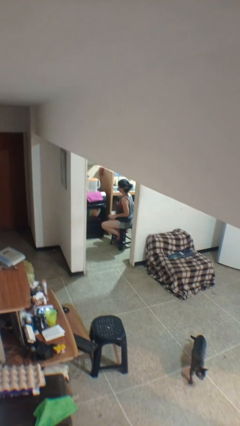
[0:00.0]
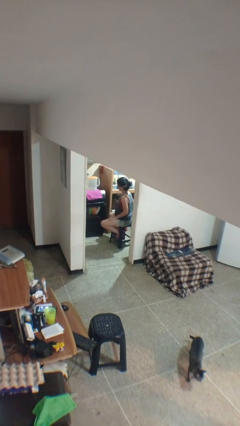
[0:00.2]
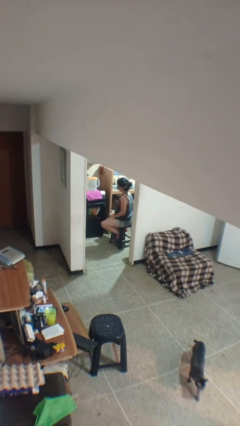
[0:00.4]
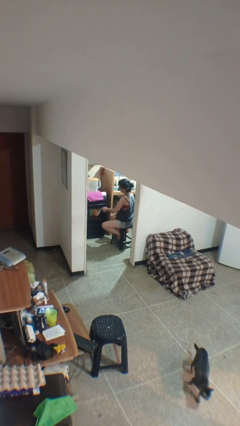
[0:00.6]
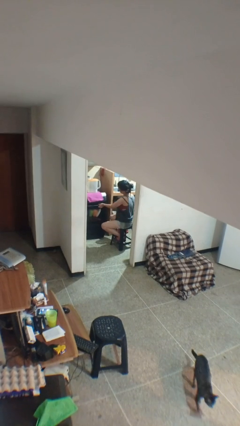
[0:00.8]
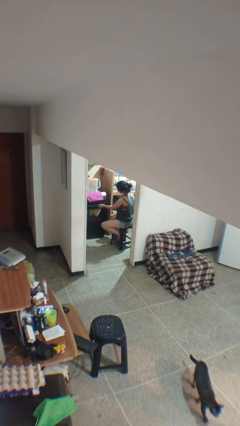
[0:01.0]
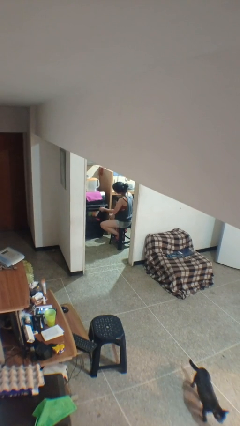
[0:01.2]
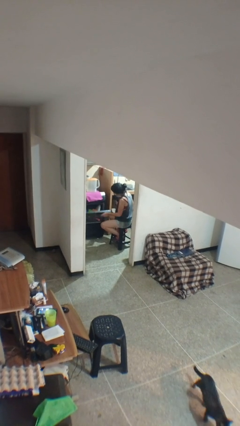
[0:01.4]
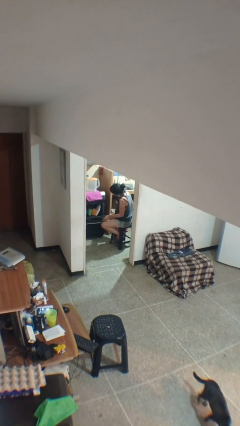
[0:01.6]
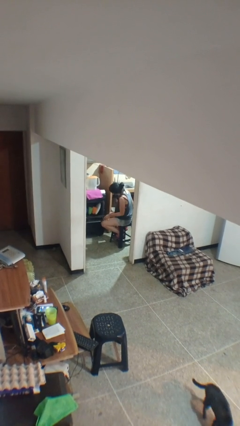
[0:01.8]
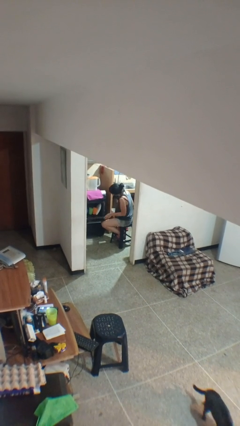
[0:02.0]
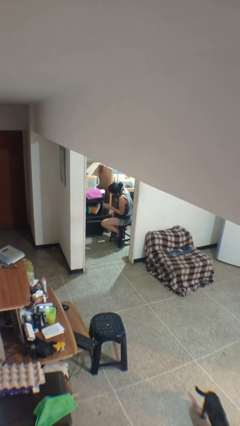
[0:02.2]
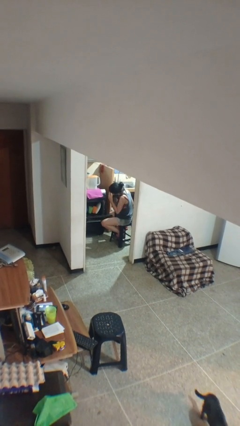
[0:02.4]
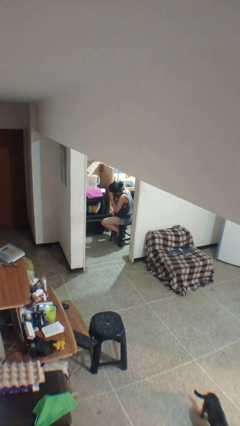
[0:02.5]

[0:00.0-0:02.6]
person opens dishwasher

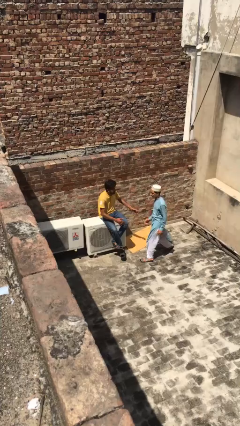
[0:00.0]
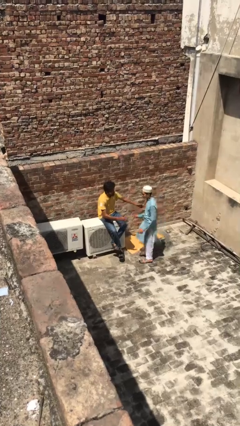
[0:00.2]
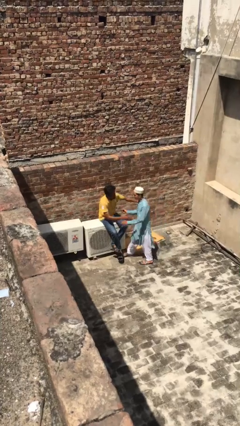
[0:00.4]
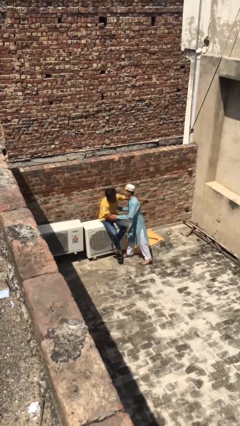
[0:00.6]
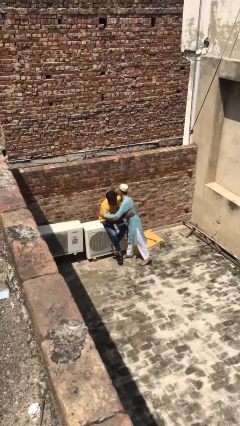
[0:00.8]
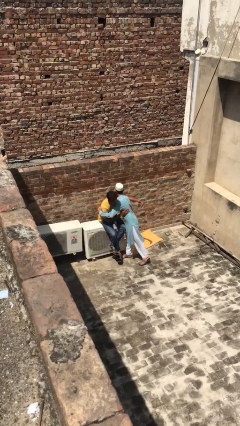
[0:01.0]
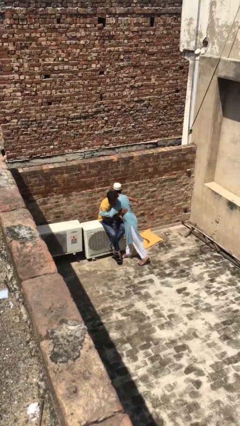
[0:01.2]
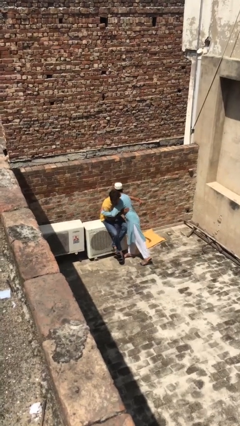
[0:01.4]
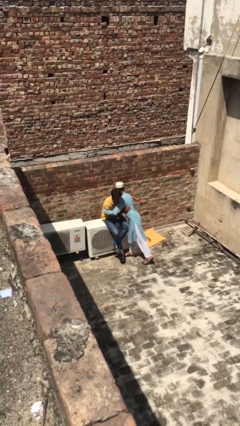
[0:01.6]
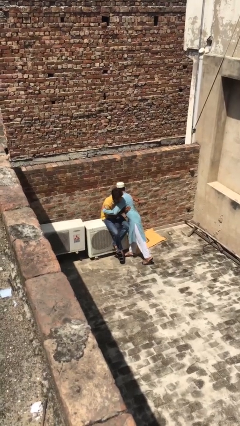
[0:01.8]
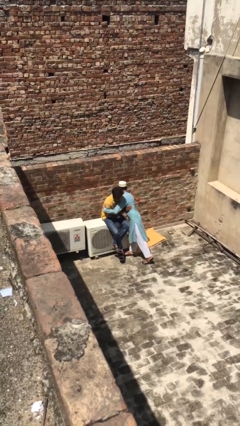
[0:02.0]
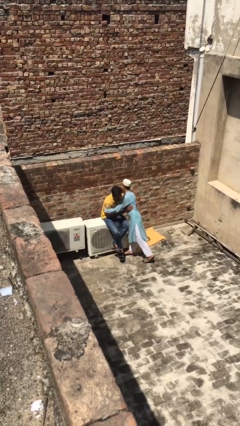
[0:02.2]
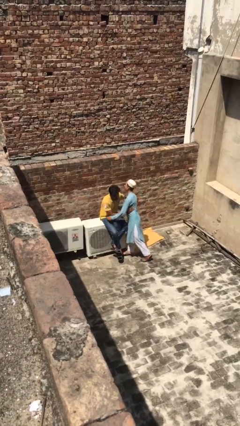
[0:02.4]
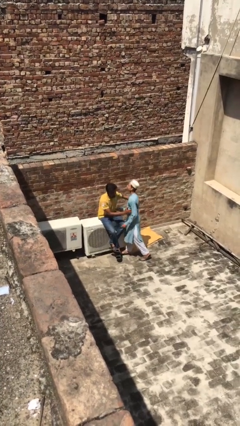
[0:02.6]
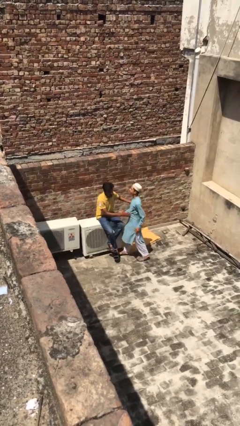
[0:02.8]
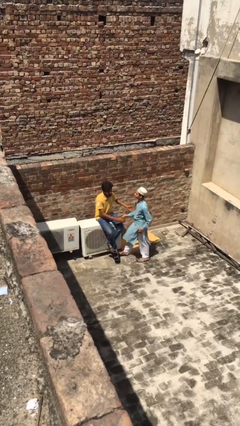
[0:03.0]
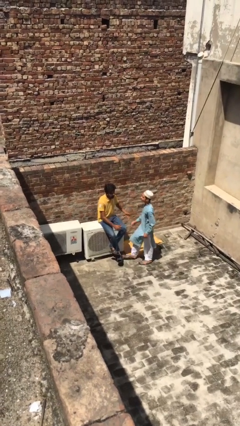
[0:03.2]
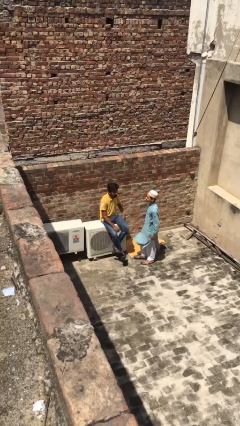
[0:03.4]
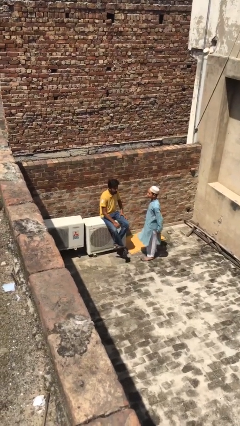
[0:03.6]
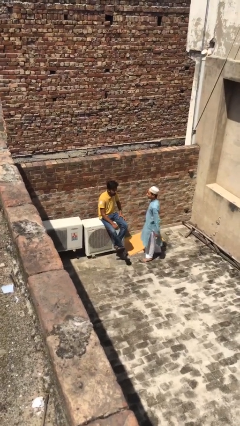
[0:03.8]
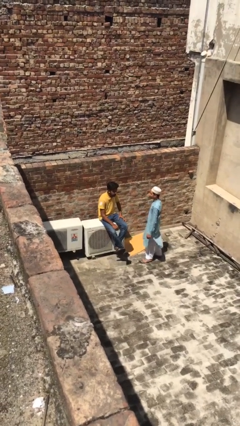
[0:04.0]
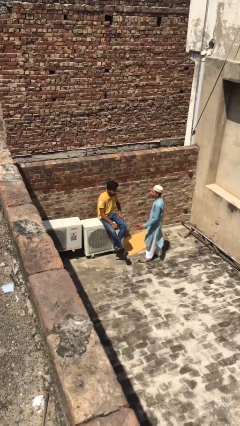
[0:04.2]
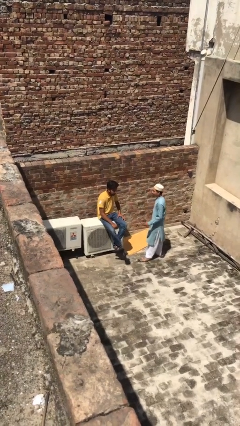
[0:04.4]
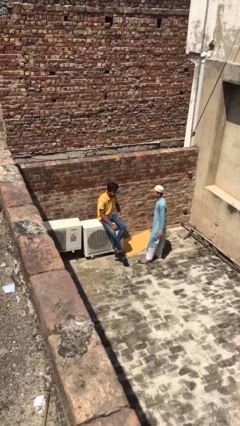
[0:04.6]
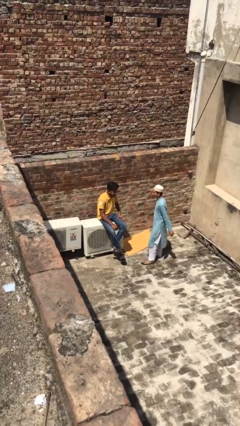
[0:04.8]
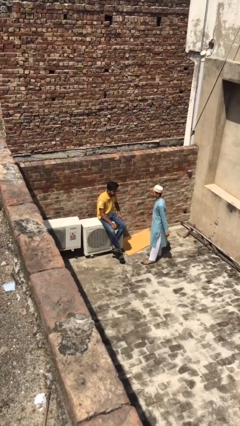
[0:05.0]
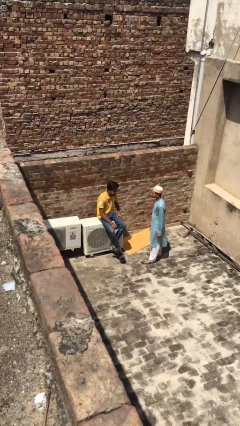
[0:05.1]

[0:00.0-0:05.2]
person embraces person

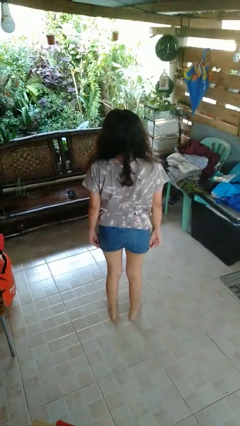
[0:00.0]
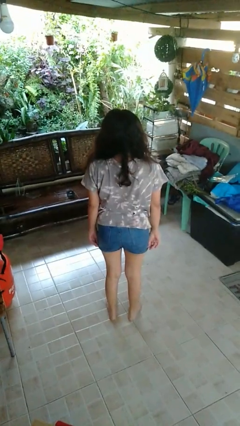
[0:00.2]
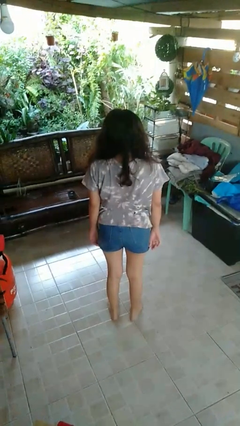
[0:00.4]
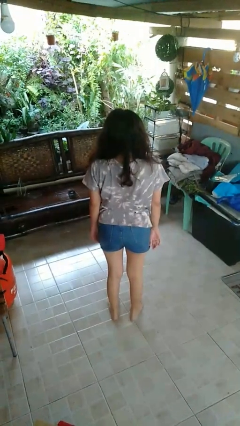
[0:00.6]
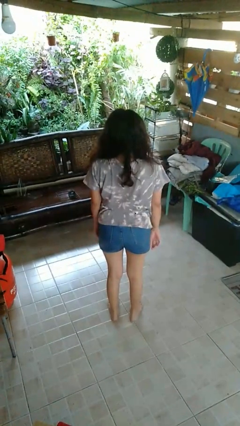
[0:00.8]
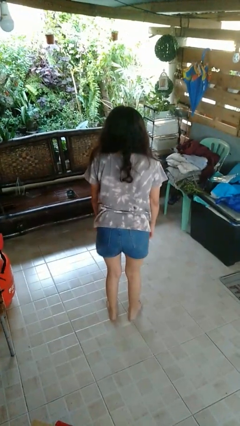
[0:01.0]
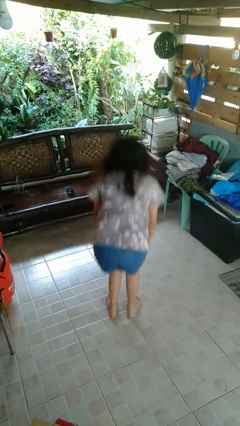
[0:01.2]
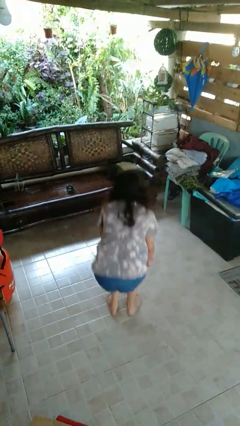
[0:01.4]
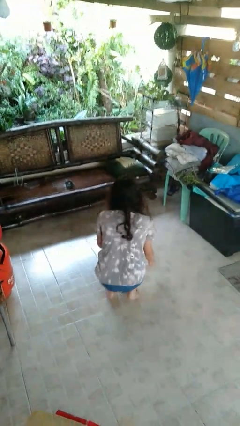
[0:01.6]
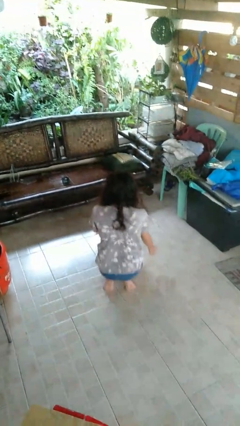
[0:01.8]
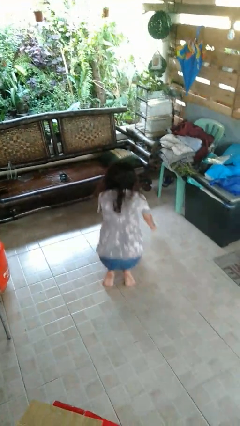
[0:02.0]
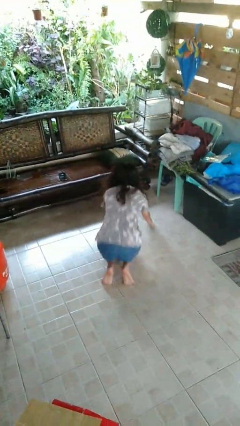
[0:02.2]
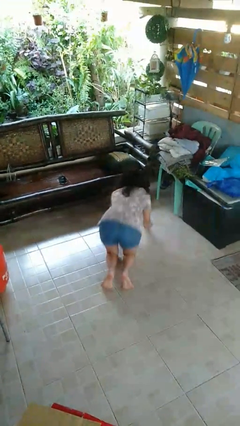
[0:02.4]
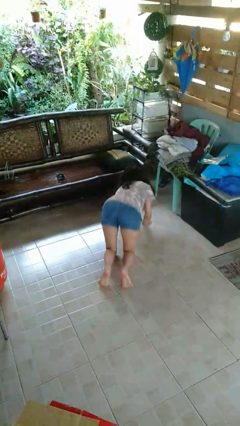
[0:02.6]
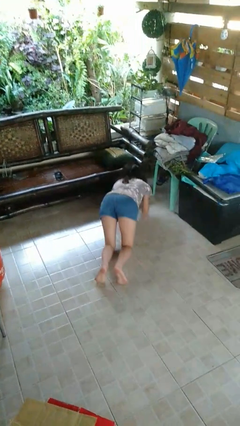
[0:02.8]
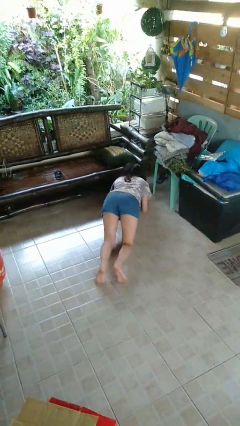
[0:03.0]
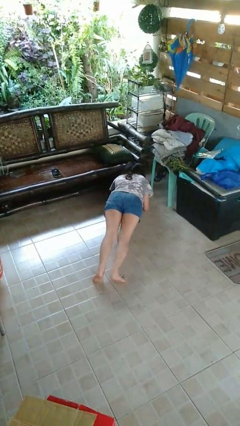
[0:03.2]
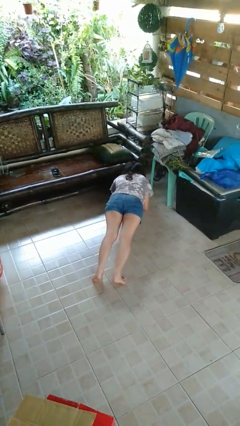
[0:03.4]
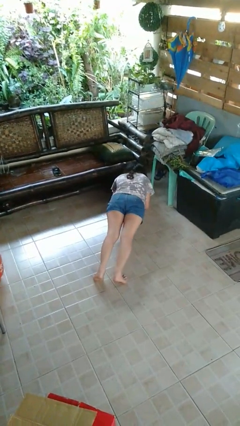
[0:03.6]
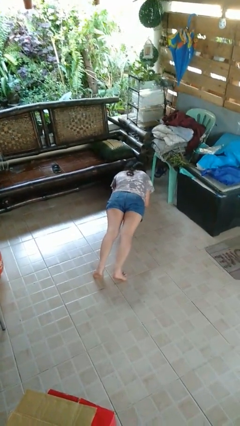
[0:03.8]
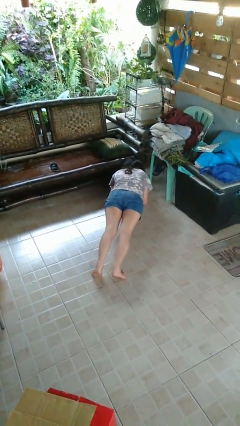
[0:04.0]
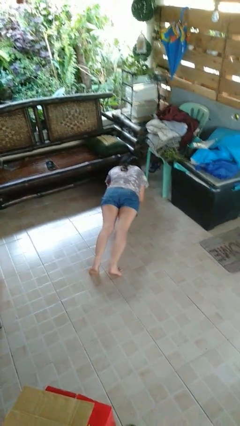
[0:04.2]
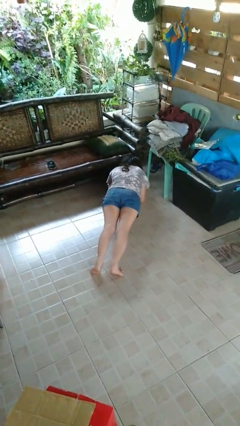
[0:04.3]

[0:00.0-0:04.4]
person exercises with plank

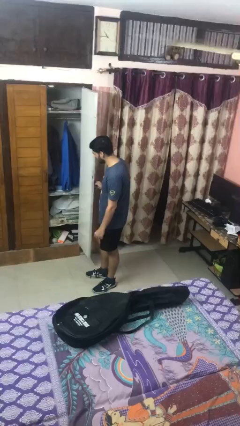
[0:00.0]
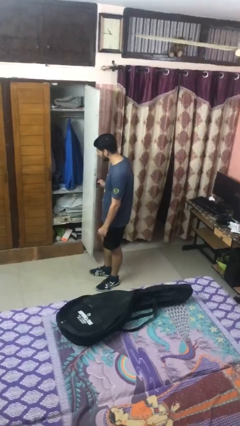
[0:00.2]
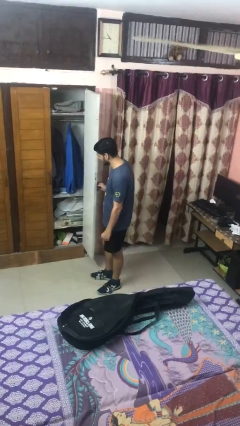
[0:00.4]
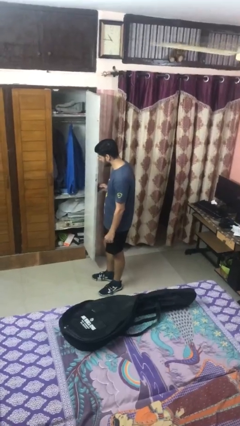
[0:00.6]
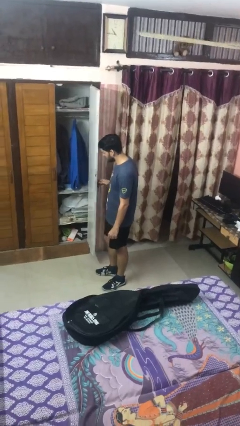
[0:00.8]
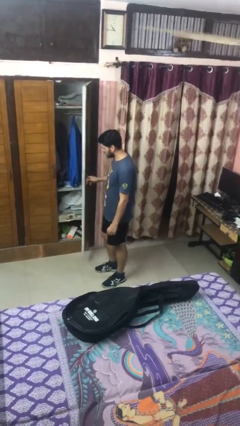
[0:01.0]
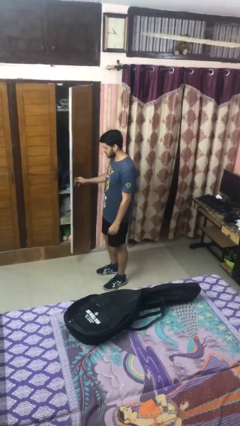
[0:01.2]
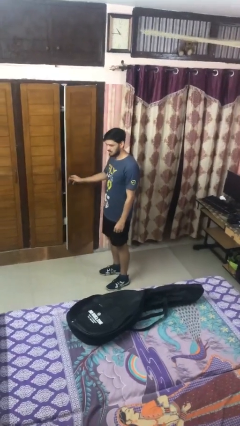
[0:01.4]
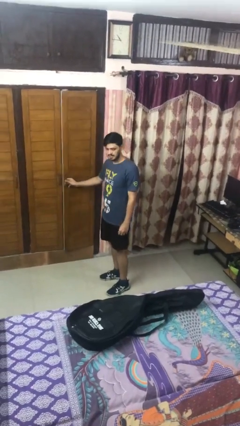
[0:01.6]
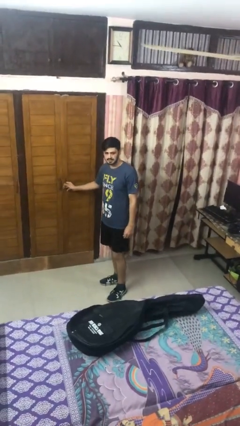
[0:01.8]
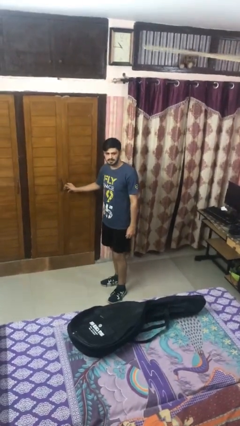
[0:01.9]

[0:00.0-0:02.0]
person closes closet door

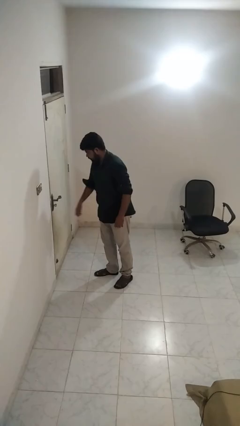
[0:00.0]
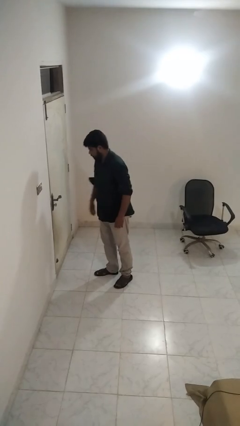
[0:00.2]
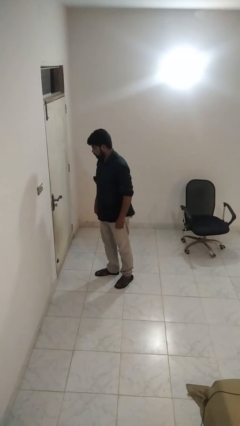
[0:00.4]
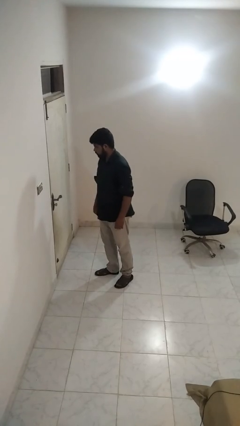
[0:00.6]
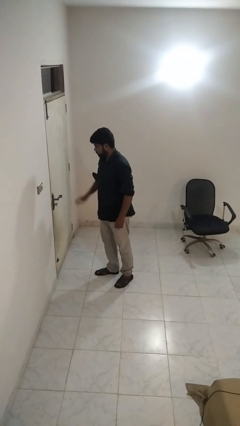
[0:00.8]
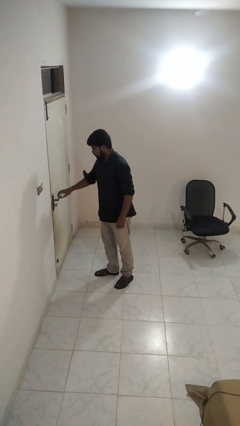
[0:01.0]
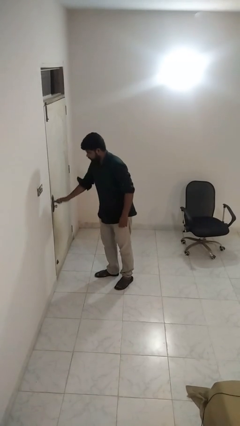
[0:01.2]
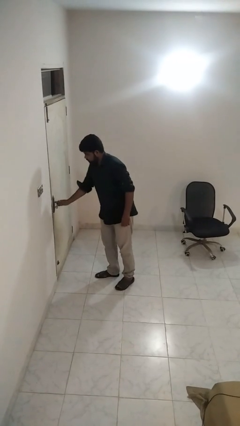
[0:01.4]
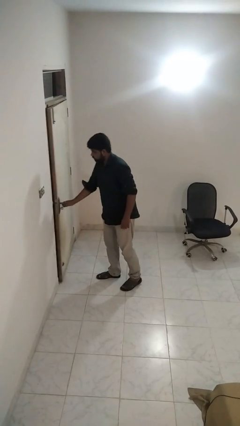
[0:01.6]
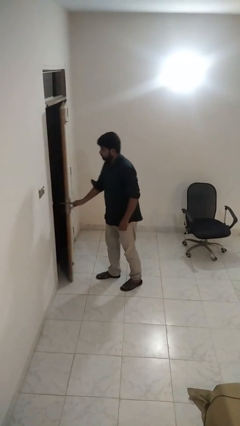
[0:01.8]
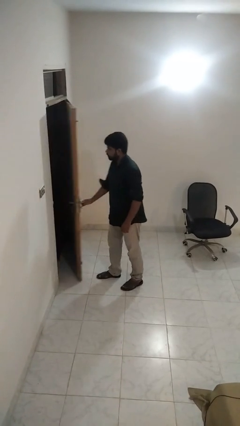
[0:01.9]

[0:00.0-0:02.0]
person unlocks door with keys

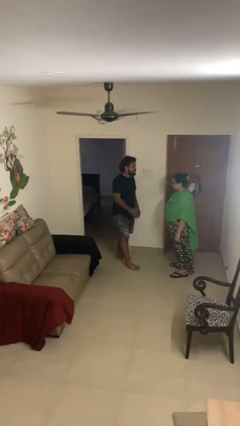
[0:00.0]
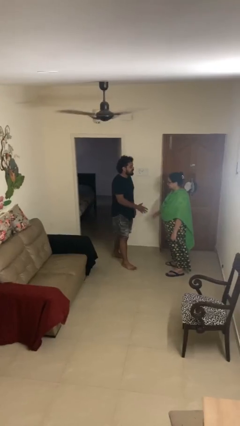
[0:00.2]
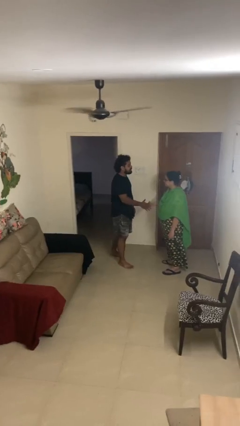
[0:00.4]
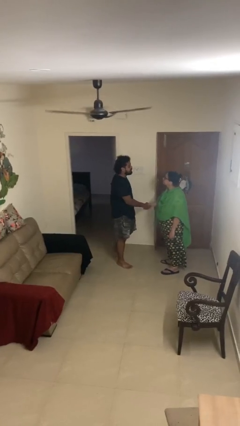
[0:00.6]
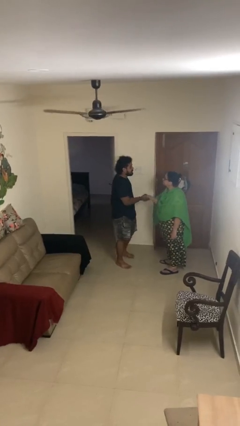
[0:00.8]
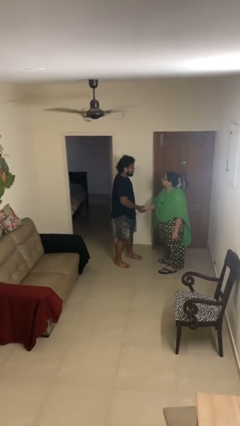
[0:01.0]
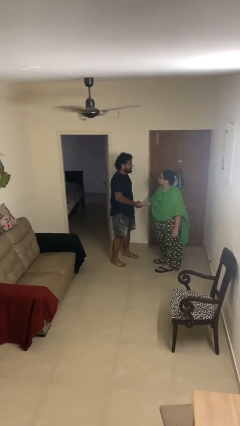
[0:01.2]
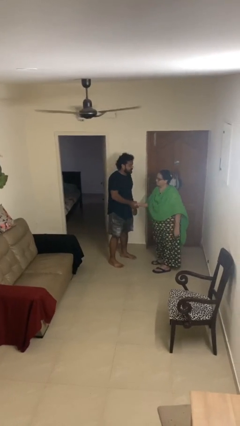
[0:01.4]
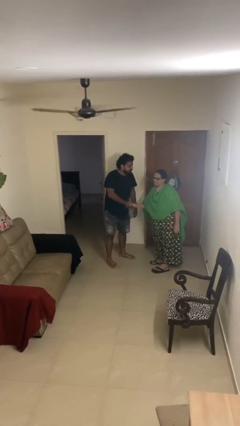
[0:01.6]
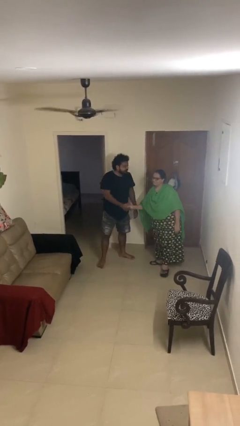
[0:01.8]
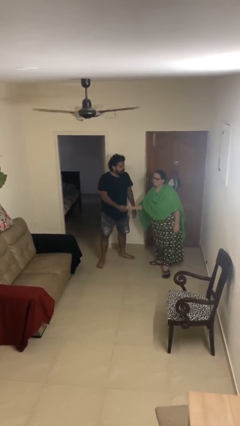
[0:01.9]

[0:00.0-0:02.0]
person shakes hand
